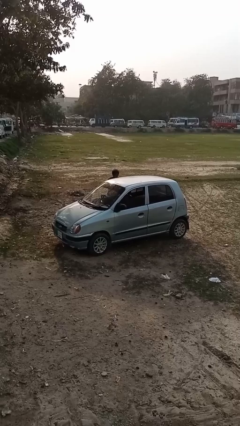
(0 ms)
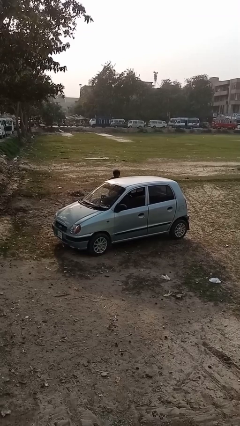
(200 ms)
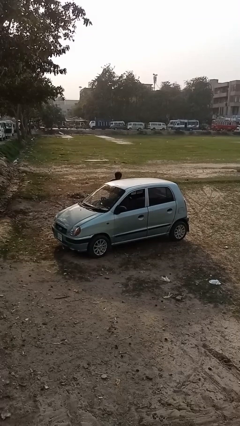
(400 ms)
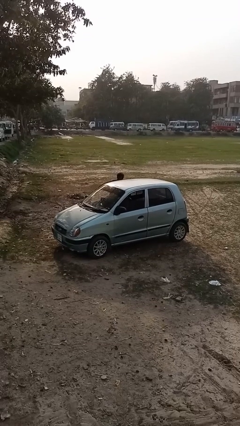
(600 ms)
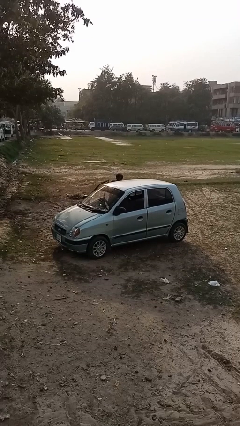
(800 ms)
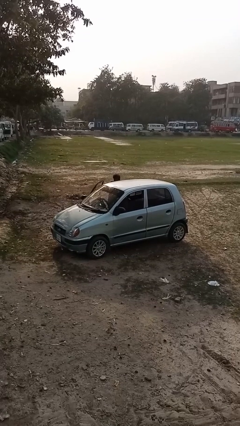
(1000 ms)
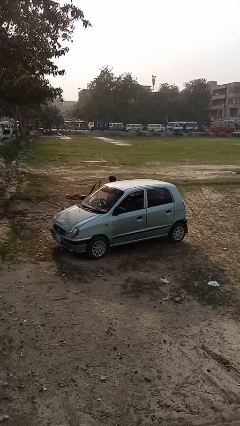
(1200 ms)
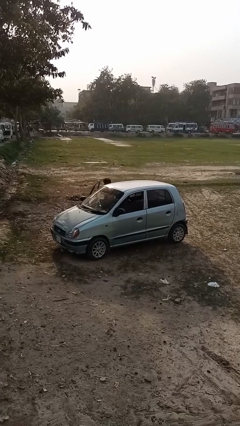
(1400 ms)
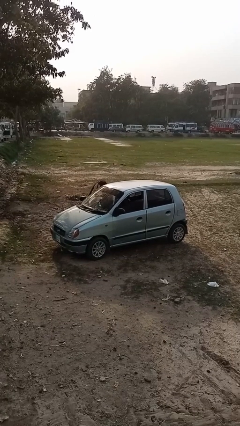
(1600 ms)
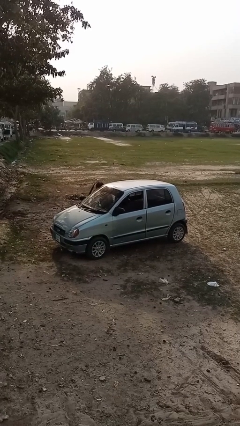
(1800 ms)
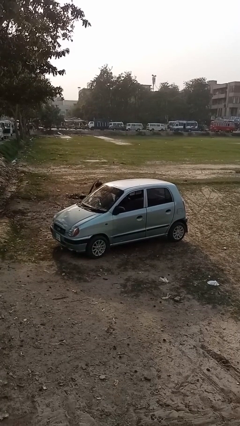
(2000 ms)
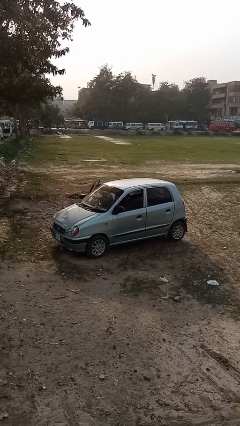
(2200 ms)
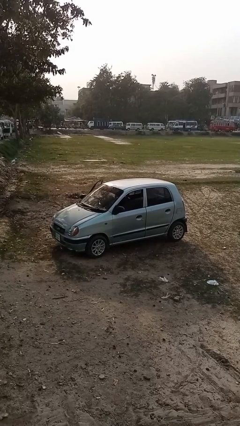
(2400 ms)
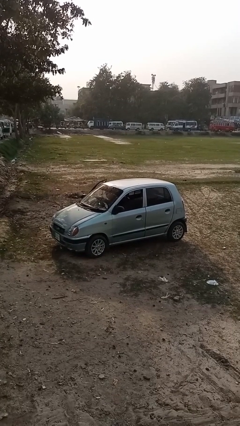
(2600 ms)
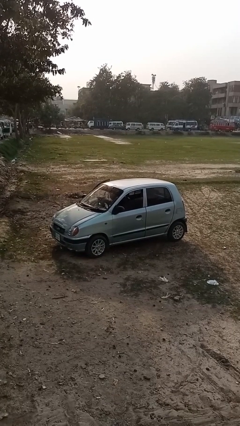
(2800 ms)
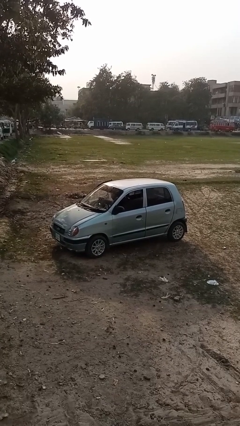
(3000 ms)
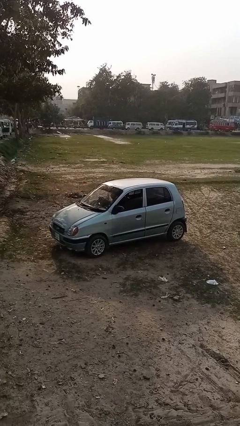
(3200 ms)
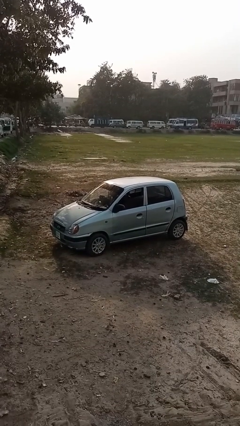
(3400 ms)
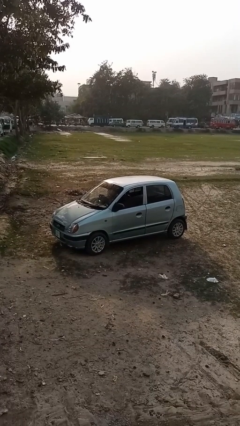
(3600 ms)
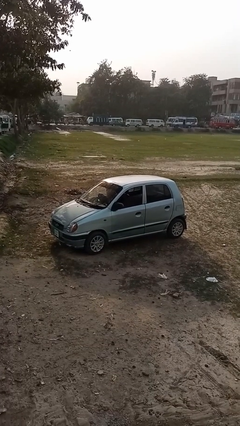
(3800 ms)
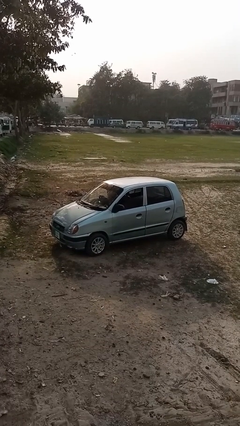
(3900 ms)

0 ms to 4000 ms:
car picks up person

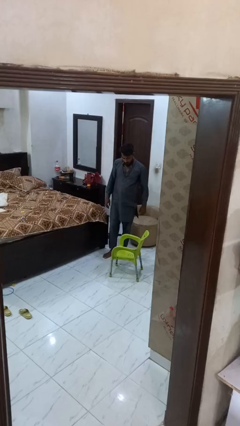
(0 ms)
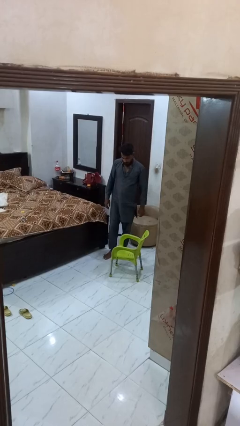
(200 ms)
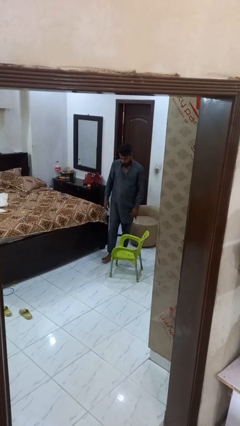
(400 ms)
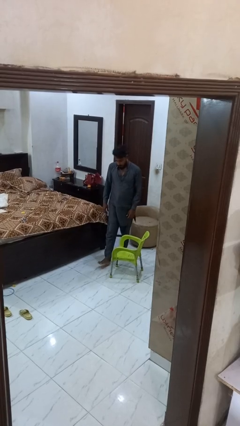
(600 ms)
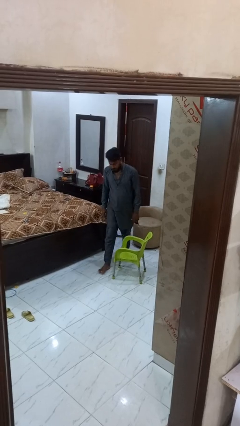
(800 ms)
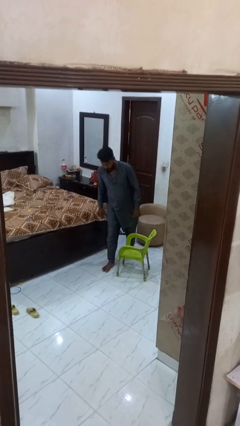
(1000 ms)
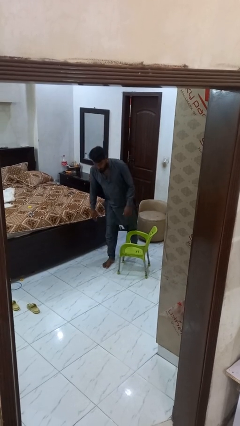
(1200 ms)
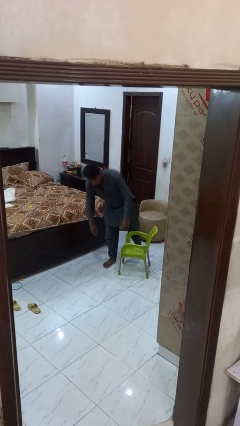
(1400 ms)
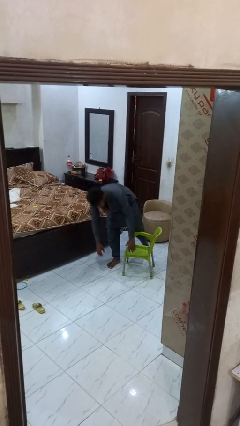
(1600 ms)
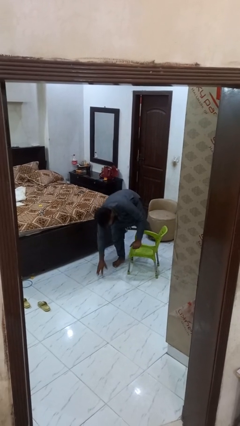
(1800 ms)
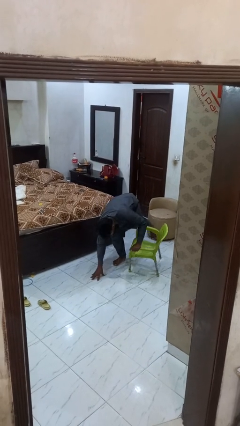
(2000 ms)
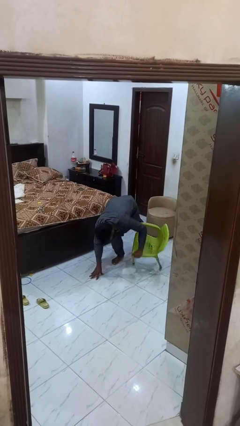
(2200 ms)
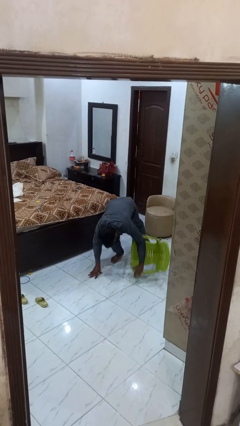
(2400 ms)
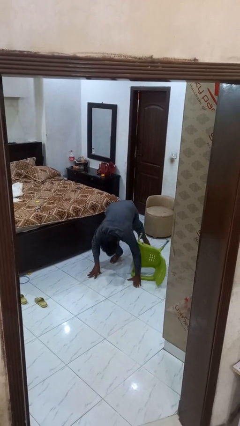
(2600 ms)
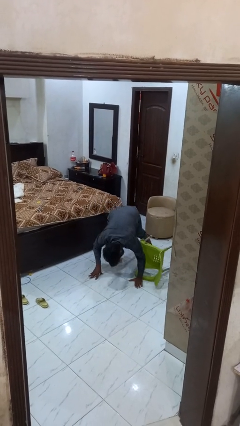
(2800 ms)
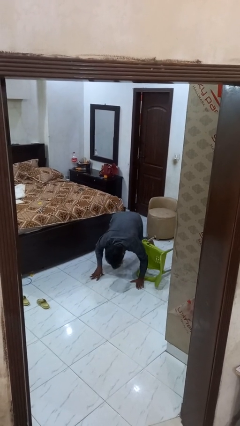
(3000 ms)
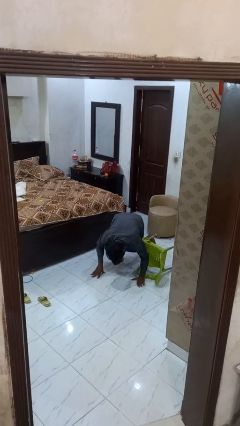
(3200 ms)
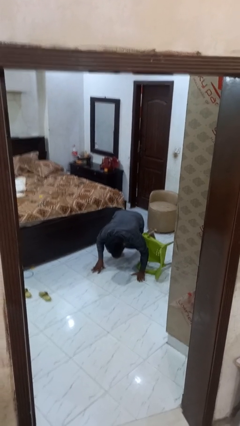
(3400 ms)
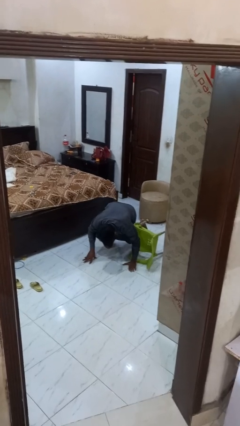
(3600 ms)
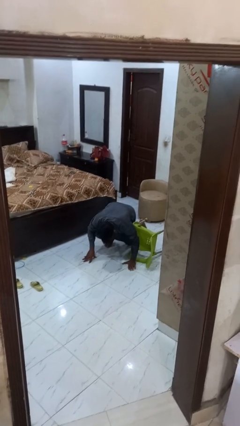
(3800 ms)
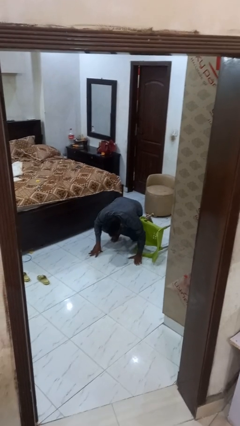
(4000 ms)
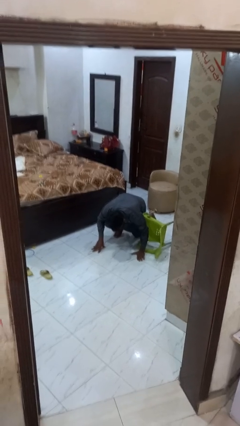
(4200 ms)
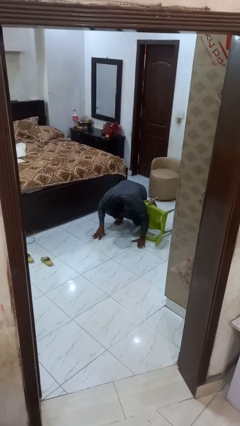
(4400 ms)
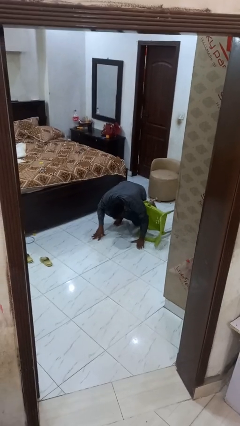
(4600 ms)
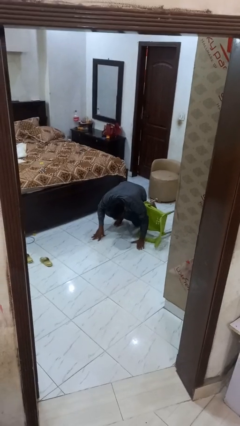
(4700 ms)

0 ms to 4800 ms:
person trips on object on floor

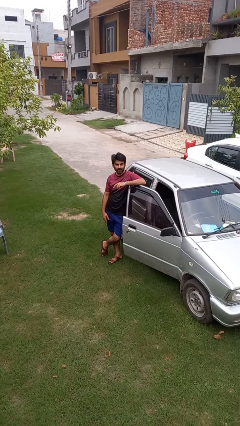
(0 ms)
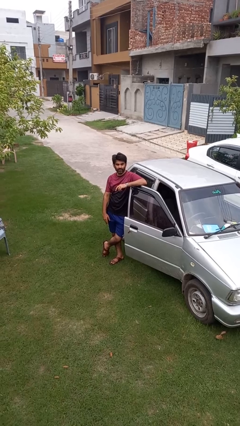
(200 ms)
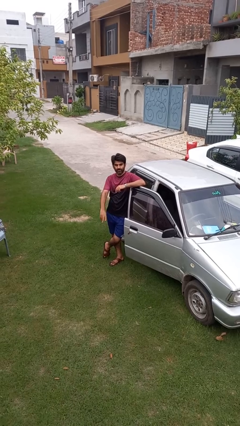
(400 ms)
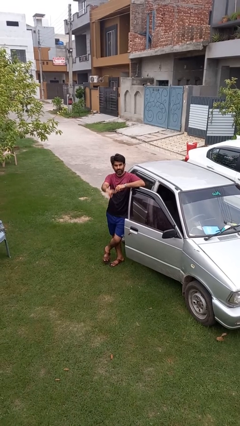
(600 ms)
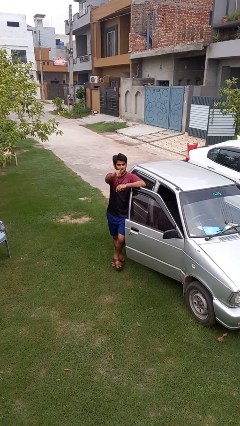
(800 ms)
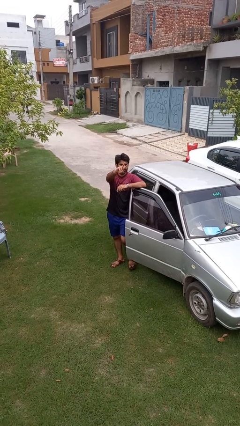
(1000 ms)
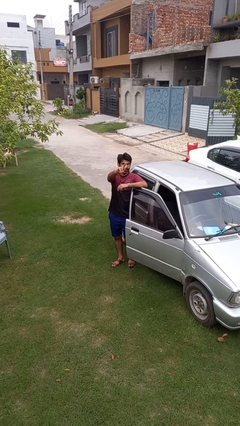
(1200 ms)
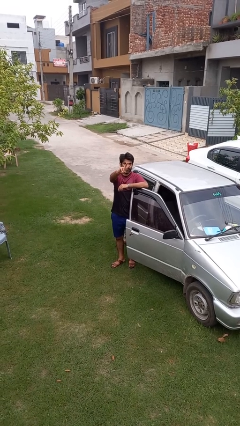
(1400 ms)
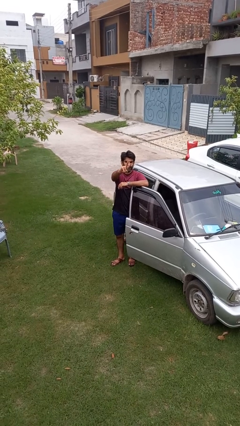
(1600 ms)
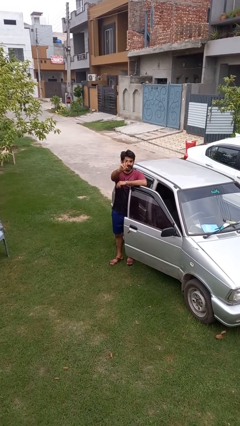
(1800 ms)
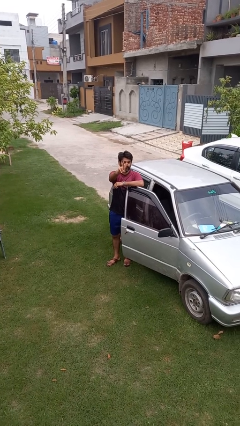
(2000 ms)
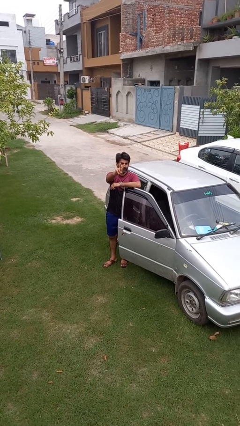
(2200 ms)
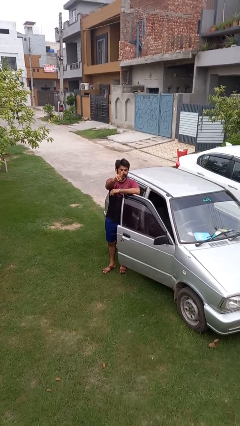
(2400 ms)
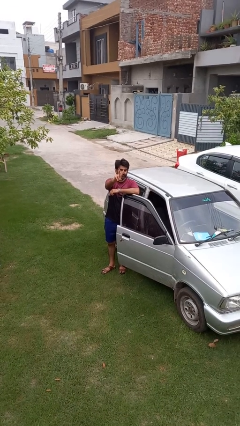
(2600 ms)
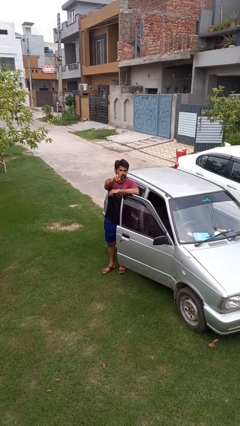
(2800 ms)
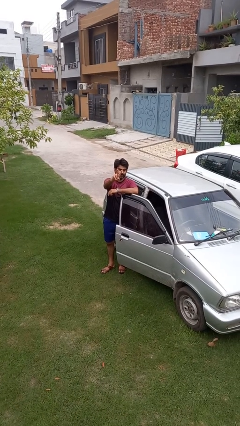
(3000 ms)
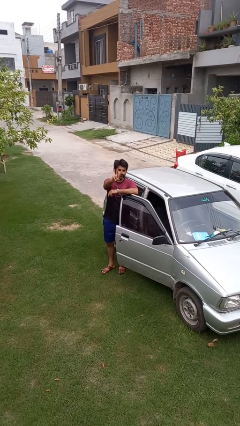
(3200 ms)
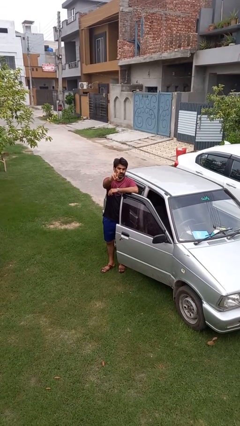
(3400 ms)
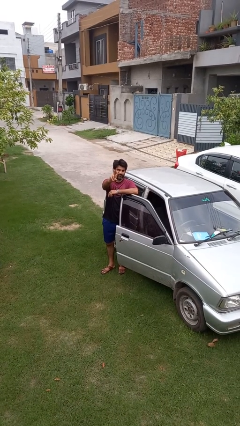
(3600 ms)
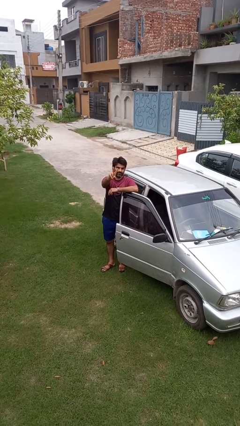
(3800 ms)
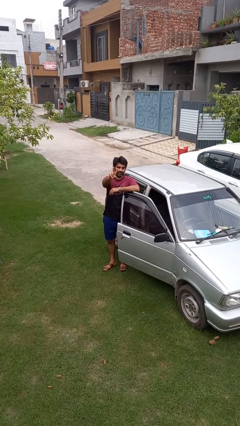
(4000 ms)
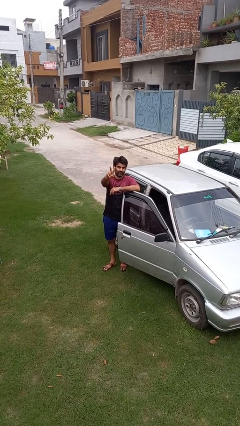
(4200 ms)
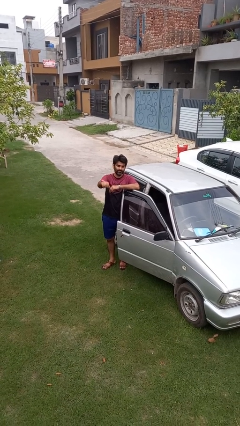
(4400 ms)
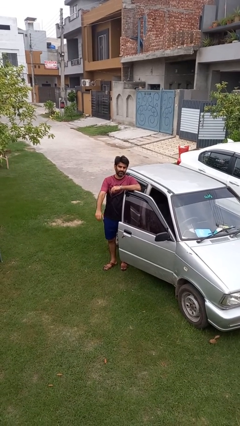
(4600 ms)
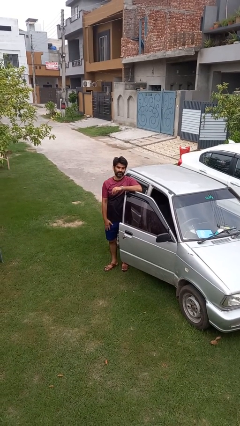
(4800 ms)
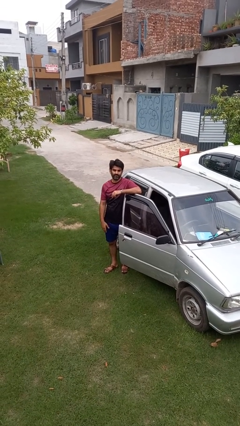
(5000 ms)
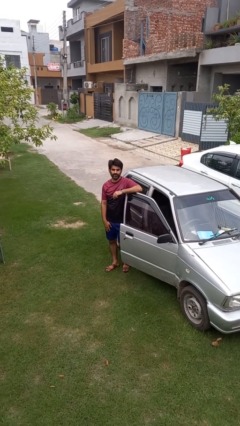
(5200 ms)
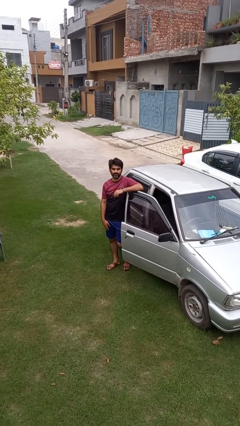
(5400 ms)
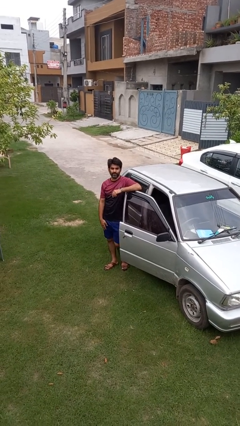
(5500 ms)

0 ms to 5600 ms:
person gestures peace

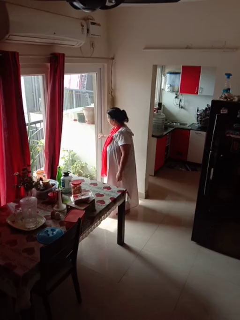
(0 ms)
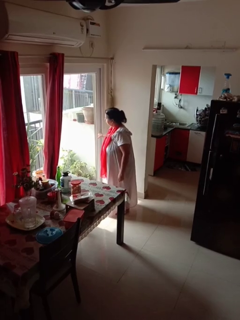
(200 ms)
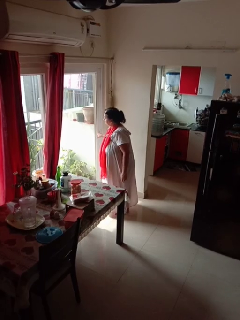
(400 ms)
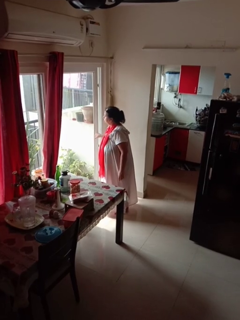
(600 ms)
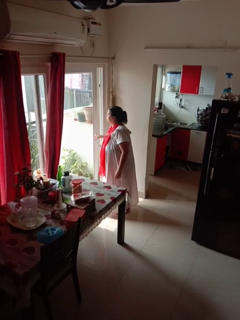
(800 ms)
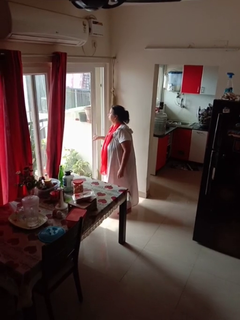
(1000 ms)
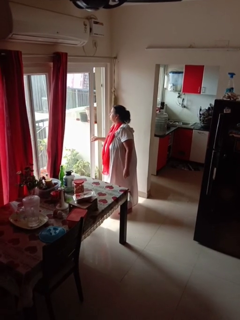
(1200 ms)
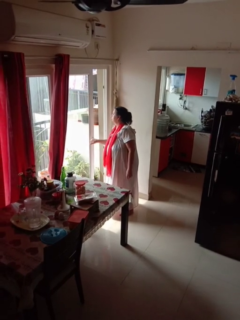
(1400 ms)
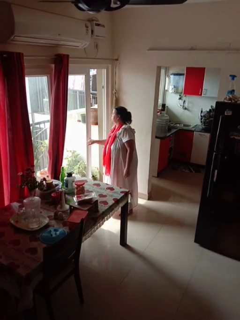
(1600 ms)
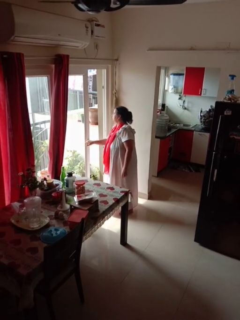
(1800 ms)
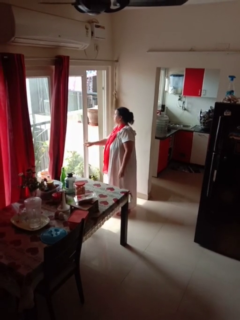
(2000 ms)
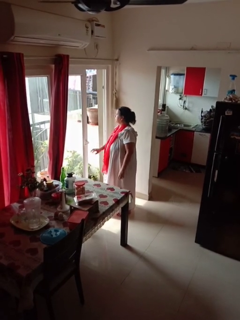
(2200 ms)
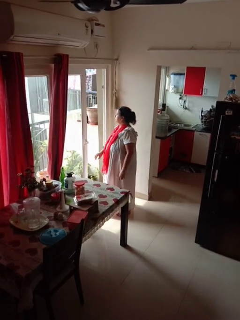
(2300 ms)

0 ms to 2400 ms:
person opens sliding door

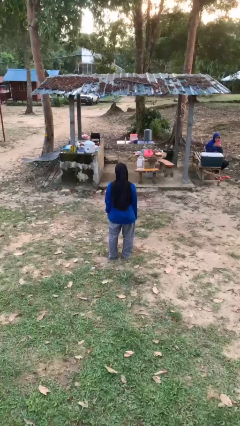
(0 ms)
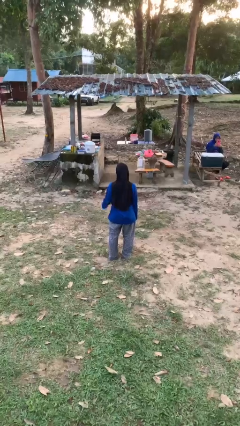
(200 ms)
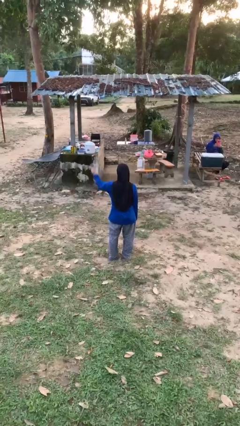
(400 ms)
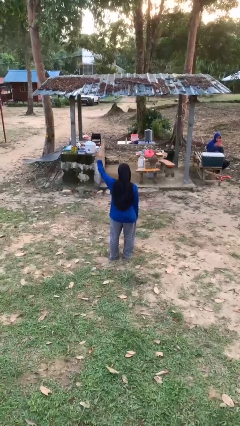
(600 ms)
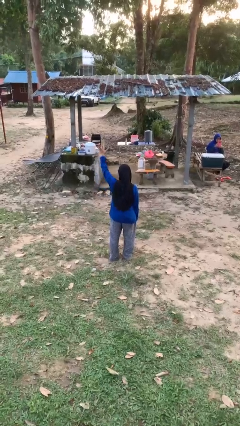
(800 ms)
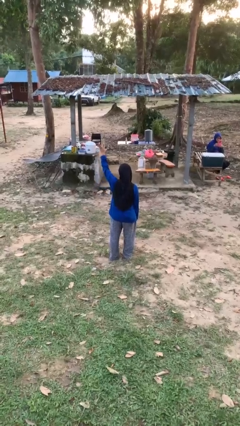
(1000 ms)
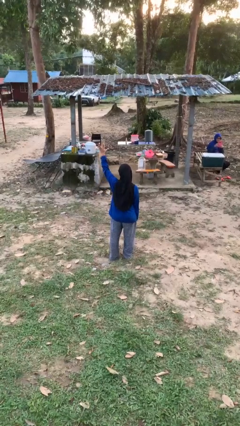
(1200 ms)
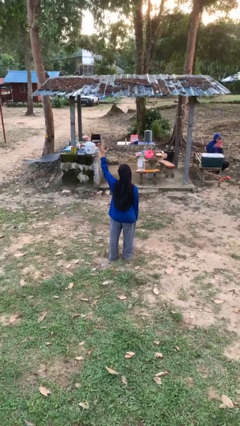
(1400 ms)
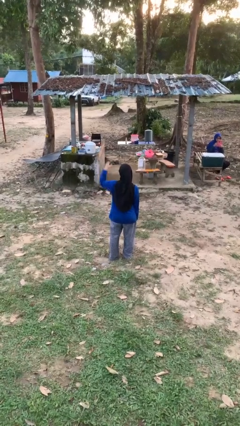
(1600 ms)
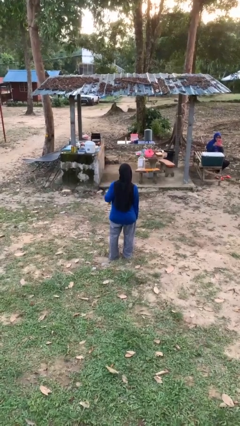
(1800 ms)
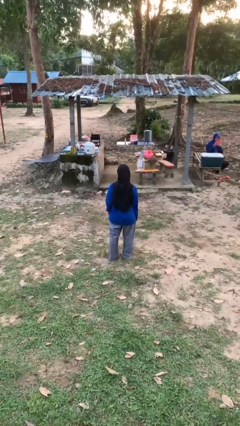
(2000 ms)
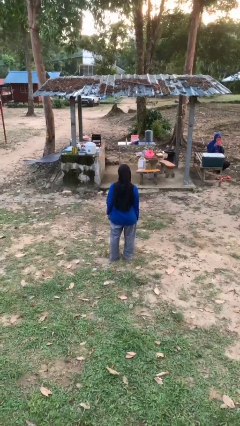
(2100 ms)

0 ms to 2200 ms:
person gestures number five
